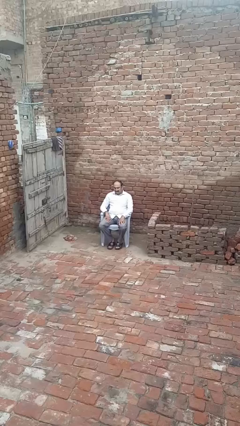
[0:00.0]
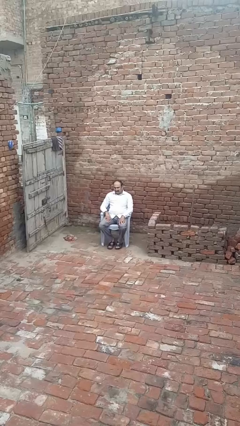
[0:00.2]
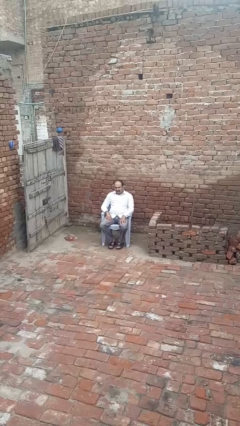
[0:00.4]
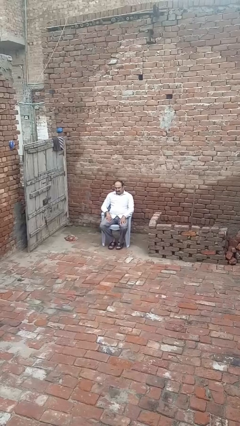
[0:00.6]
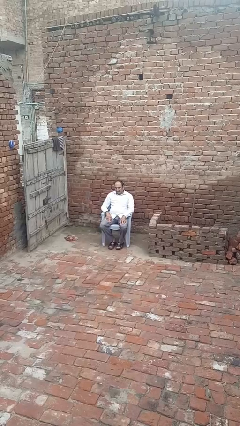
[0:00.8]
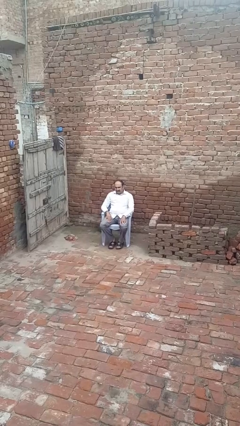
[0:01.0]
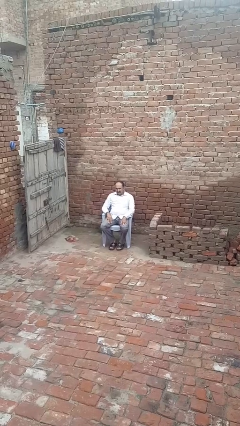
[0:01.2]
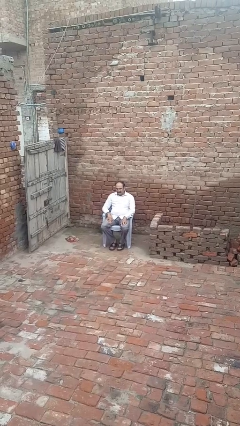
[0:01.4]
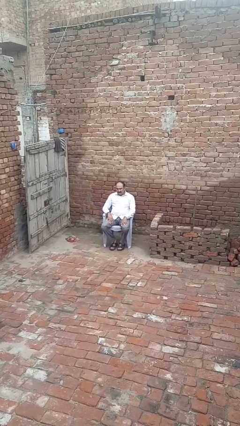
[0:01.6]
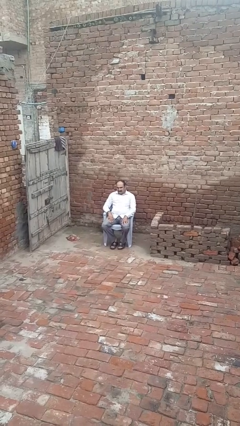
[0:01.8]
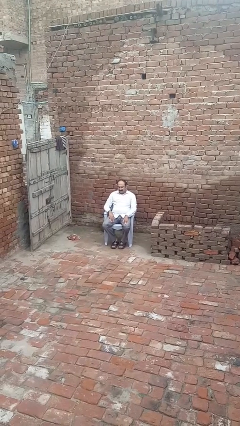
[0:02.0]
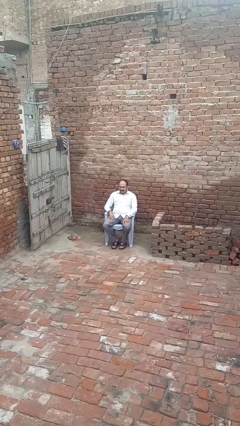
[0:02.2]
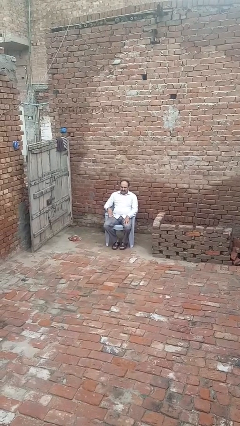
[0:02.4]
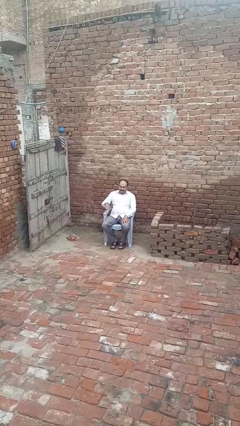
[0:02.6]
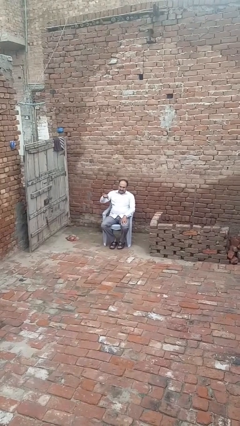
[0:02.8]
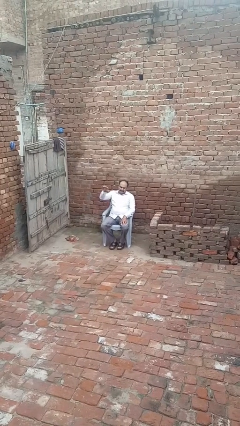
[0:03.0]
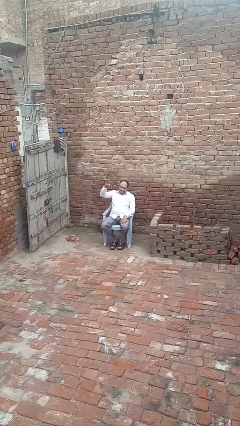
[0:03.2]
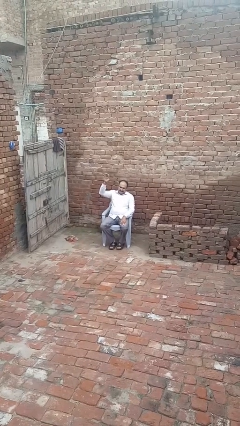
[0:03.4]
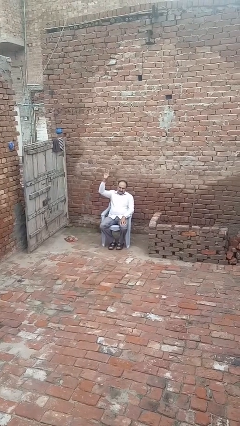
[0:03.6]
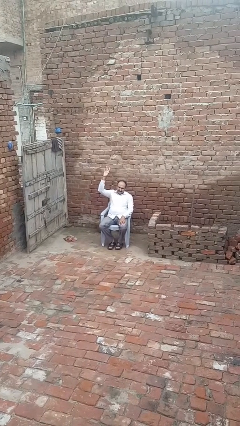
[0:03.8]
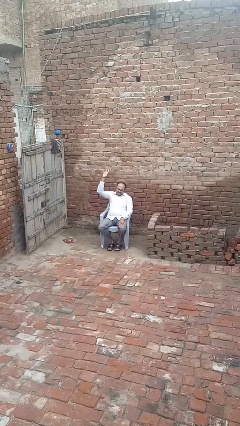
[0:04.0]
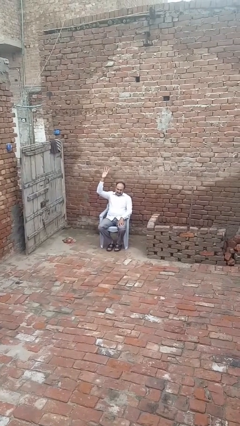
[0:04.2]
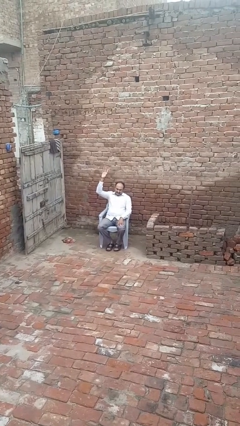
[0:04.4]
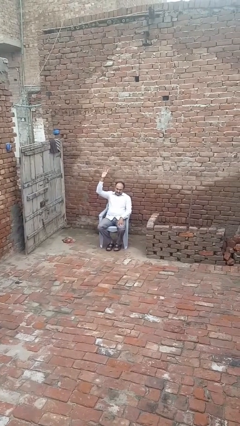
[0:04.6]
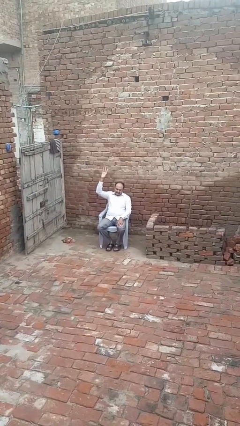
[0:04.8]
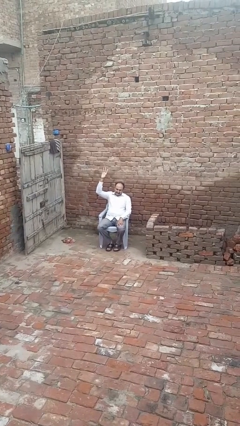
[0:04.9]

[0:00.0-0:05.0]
person gestures swipe up

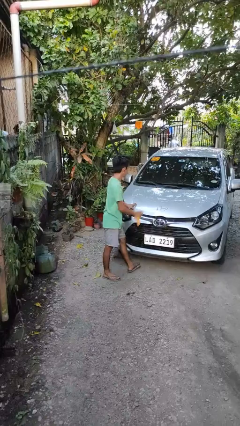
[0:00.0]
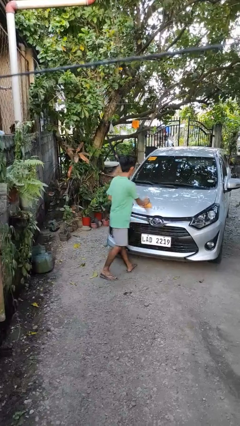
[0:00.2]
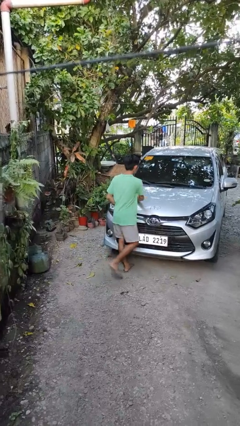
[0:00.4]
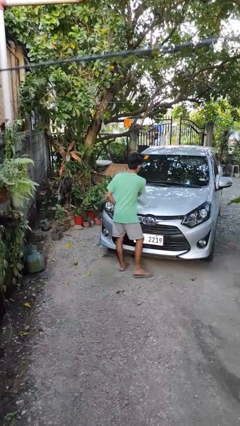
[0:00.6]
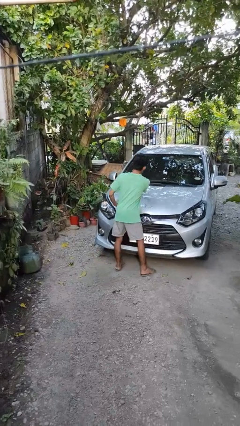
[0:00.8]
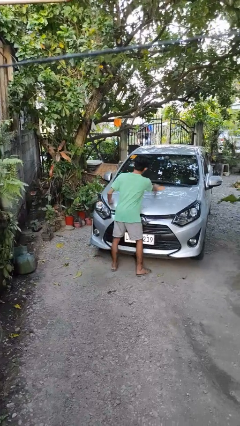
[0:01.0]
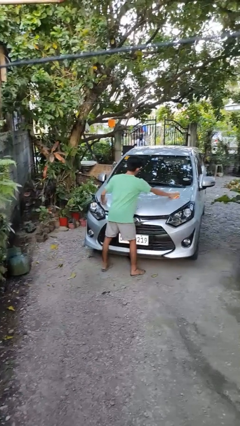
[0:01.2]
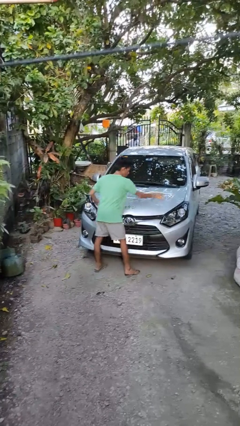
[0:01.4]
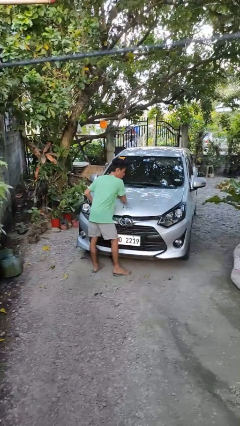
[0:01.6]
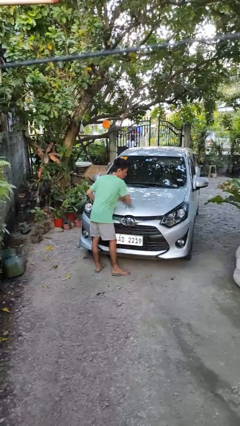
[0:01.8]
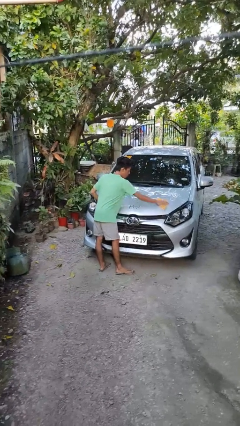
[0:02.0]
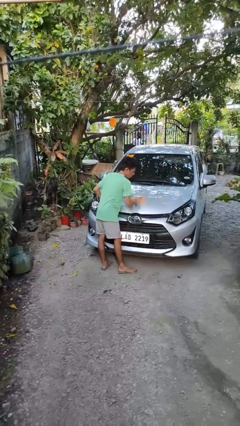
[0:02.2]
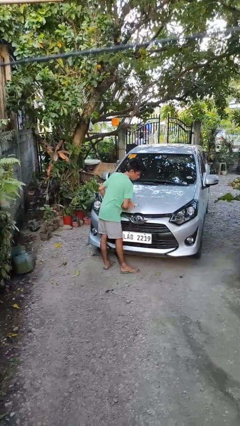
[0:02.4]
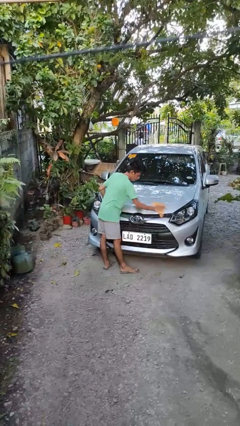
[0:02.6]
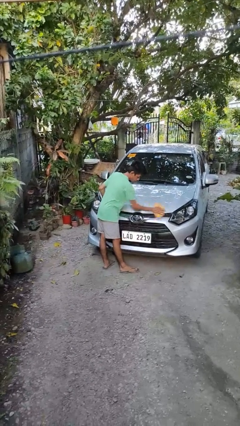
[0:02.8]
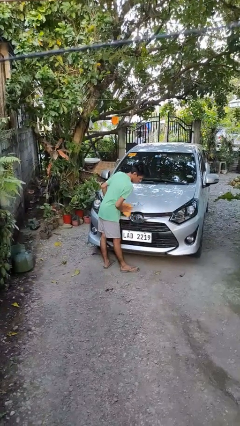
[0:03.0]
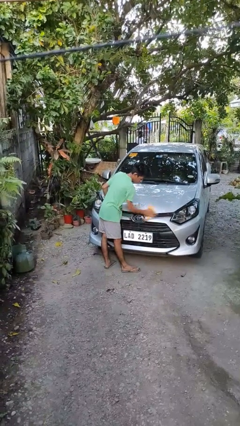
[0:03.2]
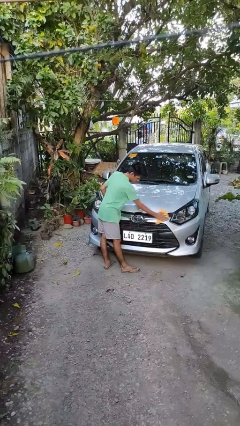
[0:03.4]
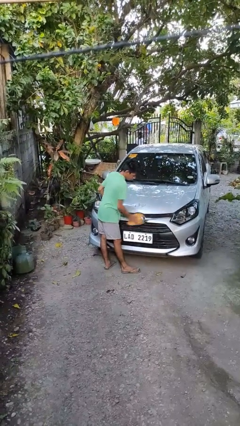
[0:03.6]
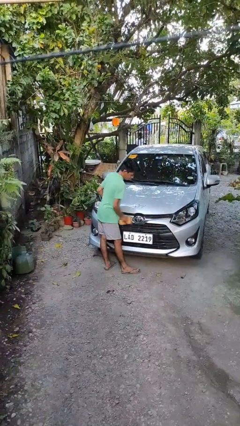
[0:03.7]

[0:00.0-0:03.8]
person polishes car with rag

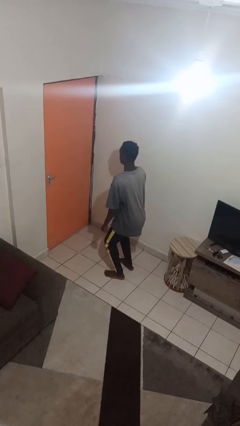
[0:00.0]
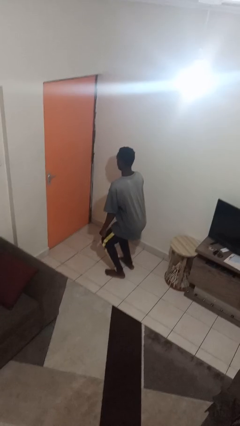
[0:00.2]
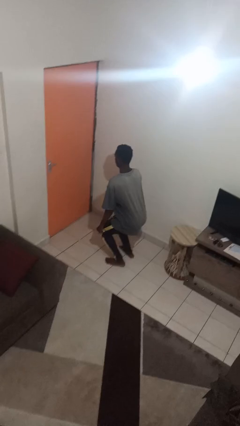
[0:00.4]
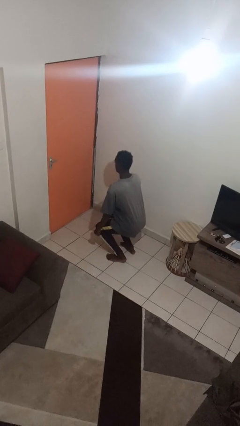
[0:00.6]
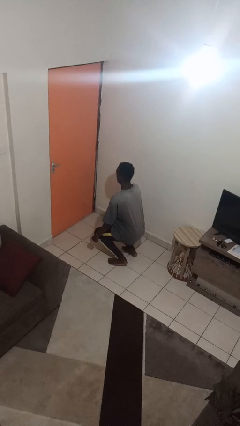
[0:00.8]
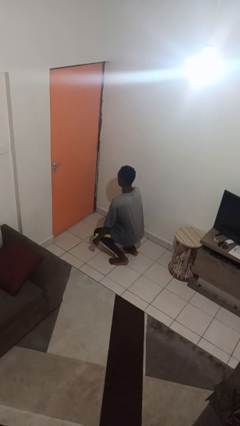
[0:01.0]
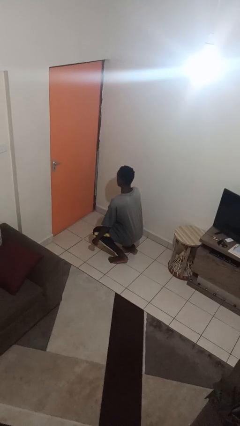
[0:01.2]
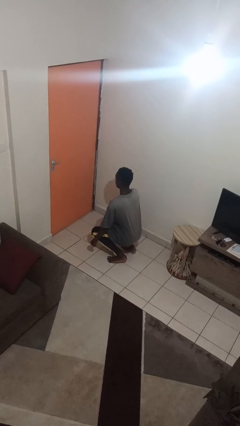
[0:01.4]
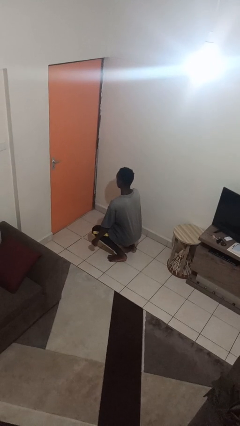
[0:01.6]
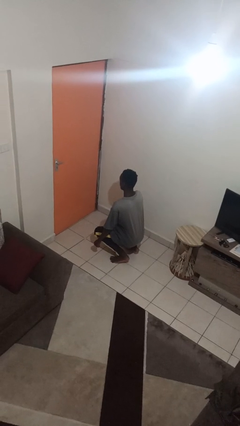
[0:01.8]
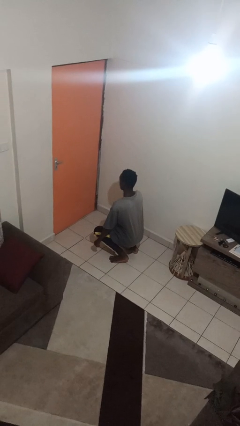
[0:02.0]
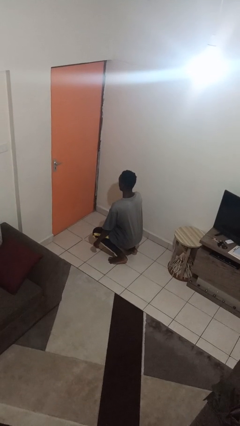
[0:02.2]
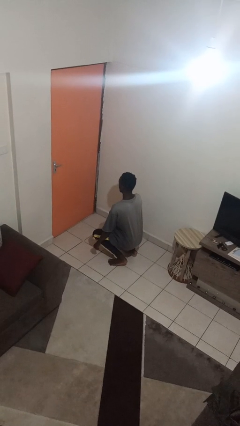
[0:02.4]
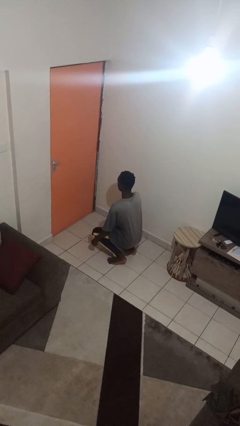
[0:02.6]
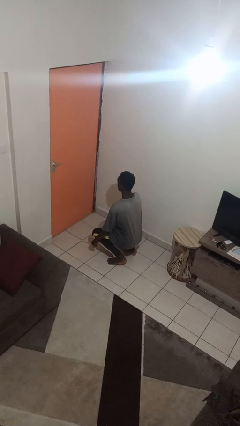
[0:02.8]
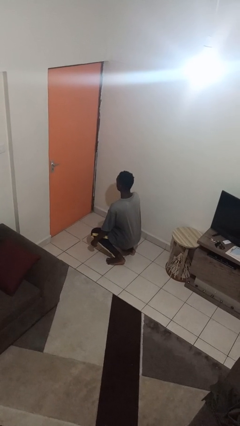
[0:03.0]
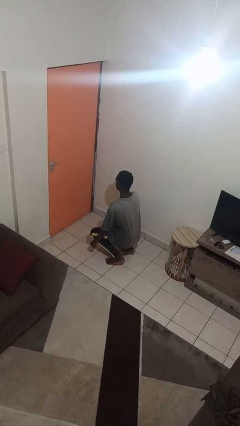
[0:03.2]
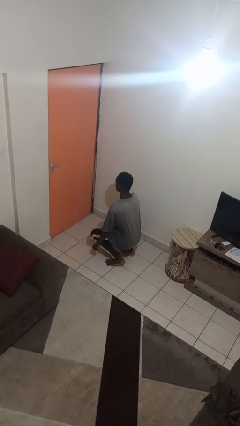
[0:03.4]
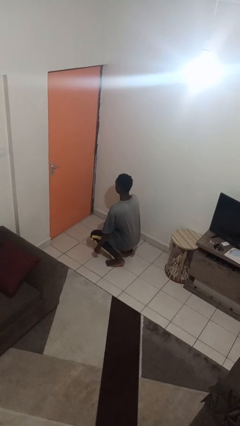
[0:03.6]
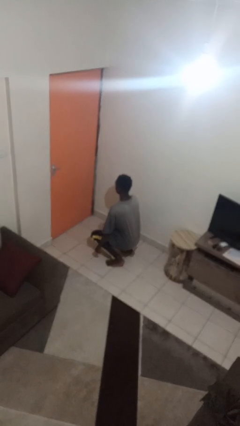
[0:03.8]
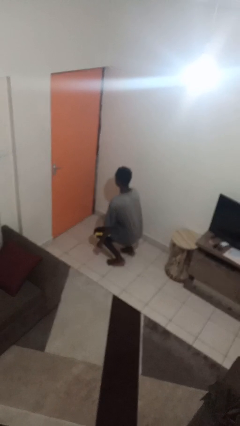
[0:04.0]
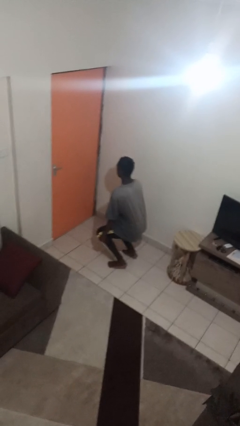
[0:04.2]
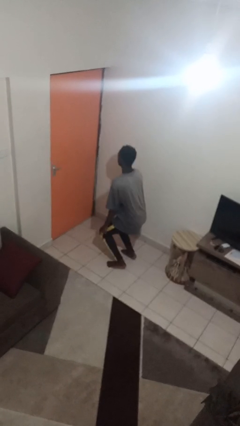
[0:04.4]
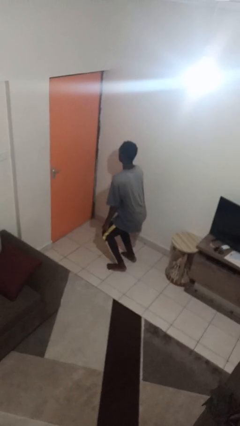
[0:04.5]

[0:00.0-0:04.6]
person squats

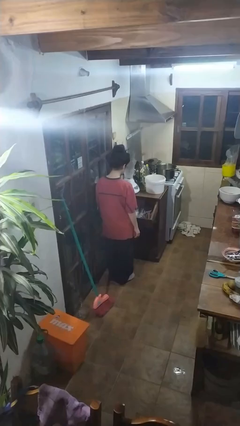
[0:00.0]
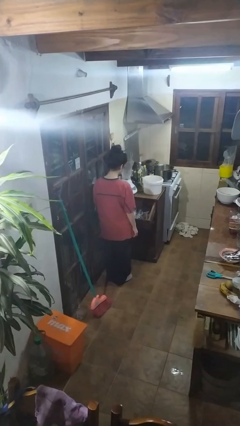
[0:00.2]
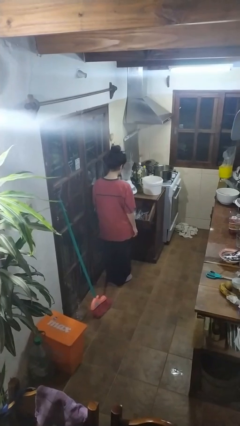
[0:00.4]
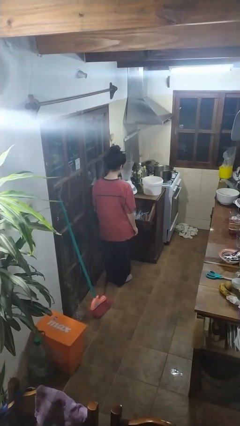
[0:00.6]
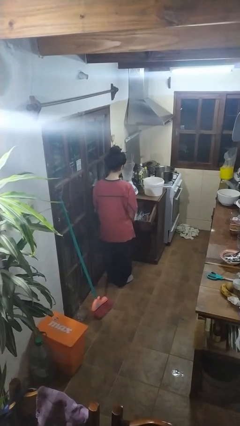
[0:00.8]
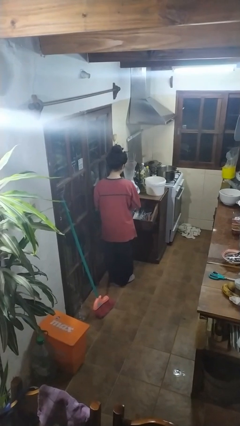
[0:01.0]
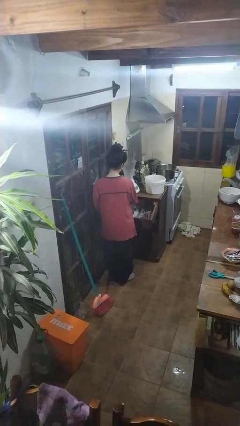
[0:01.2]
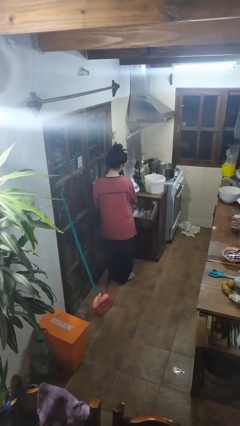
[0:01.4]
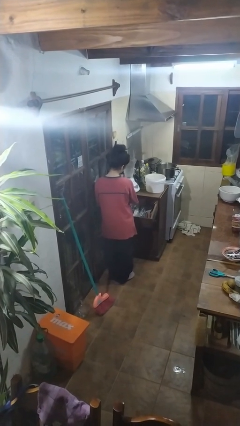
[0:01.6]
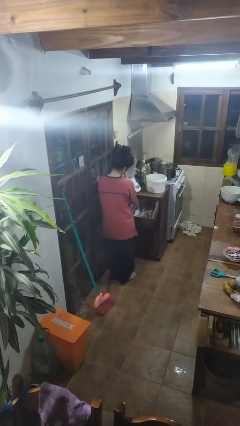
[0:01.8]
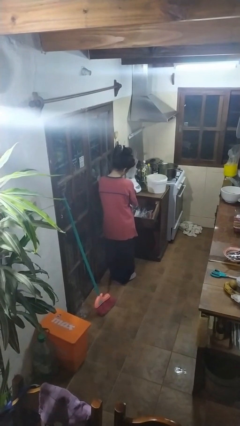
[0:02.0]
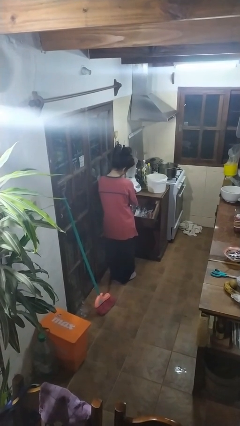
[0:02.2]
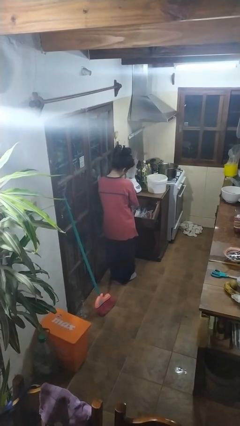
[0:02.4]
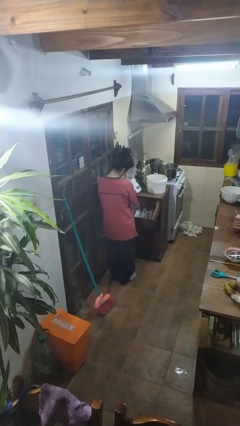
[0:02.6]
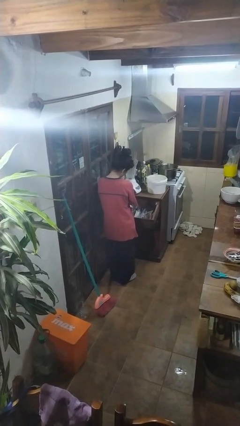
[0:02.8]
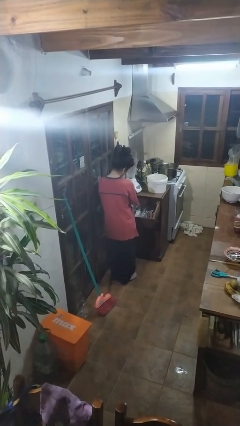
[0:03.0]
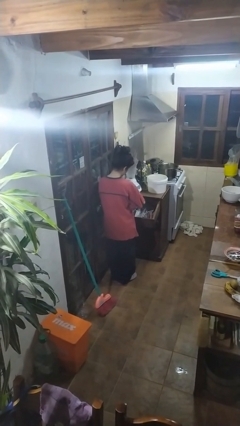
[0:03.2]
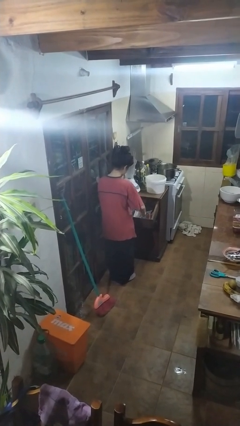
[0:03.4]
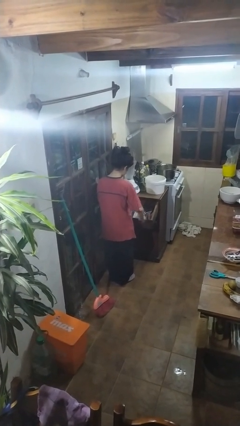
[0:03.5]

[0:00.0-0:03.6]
person searches in kitchen drawer

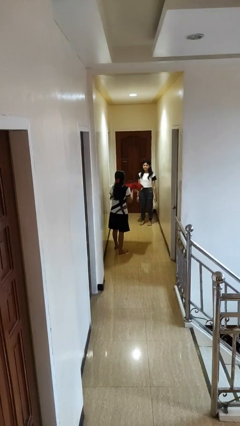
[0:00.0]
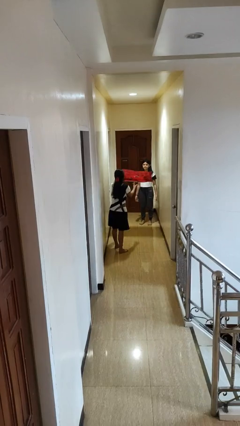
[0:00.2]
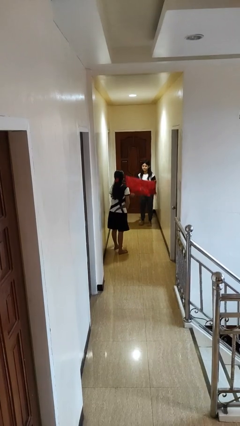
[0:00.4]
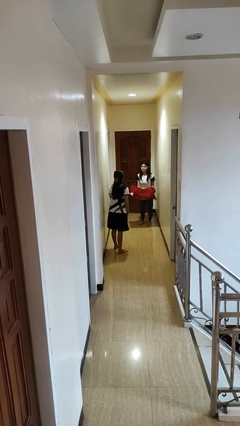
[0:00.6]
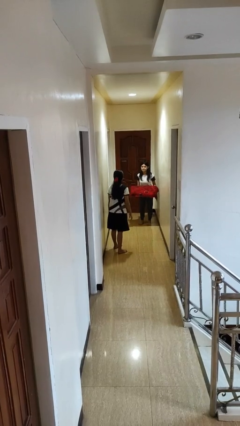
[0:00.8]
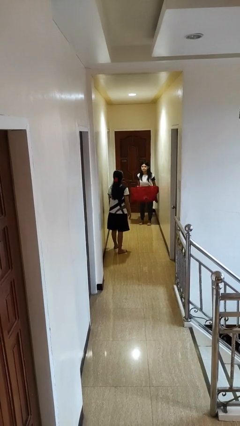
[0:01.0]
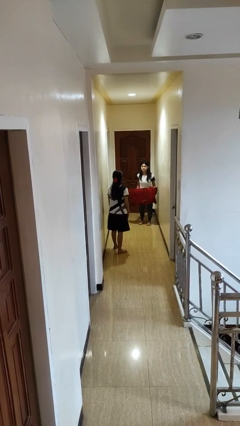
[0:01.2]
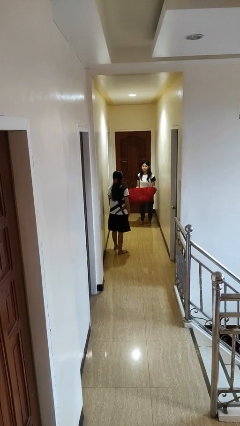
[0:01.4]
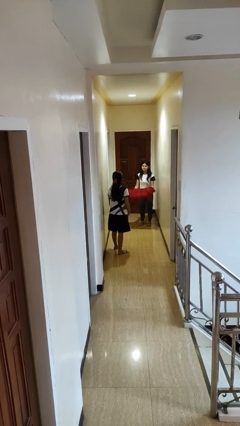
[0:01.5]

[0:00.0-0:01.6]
person throws object to person
